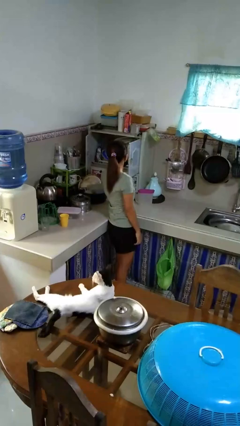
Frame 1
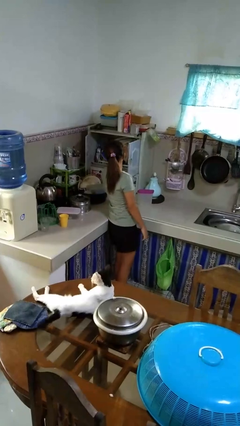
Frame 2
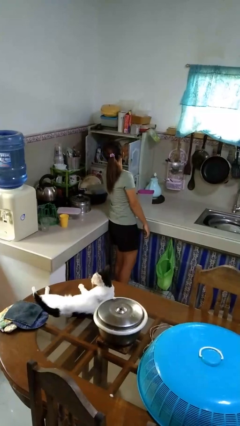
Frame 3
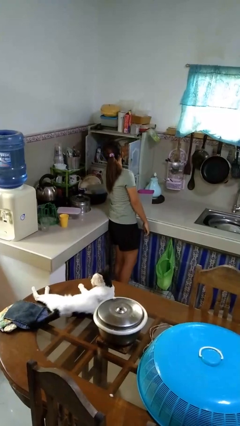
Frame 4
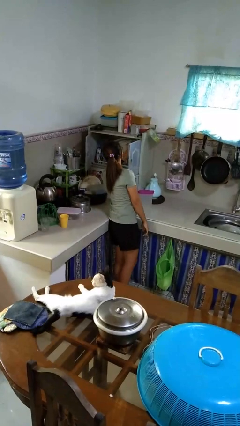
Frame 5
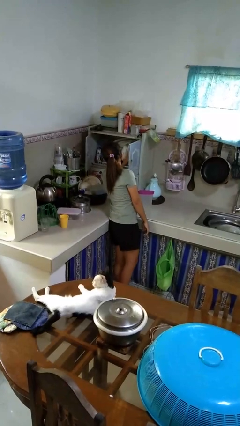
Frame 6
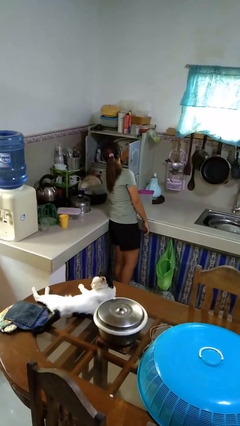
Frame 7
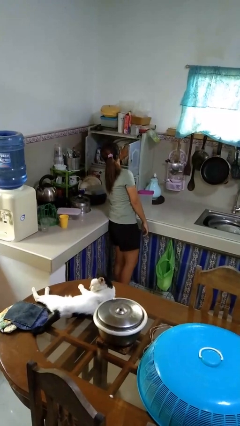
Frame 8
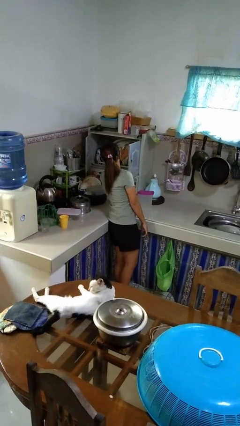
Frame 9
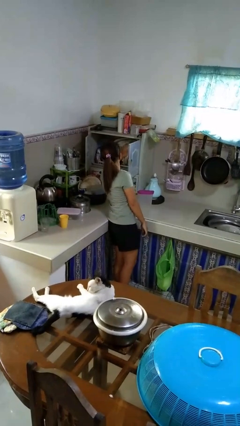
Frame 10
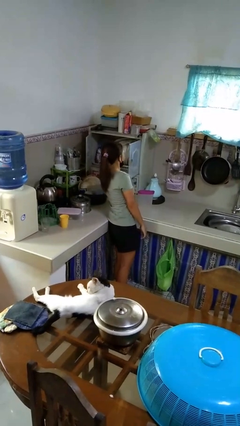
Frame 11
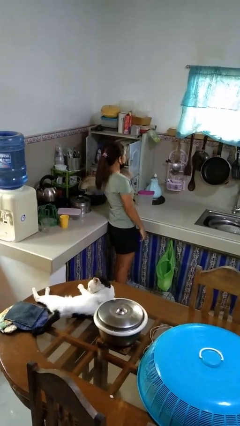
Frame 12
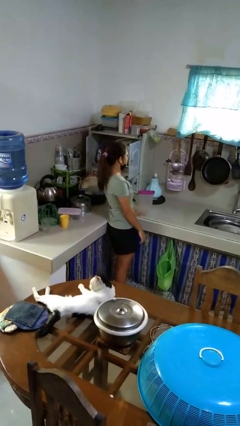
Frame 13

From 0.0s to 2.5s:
person searches in kitchen drawer

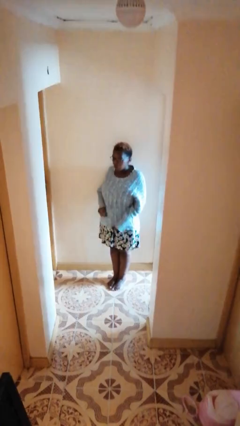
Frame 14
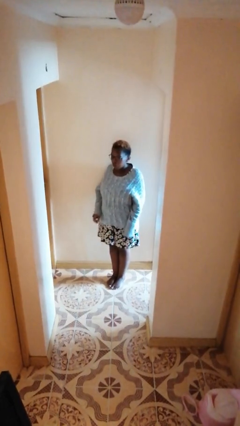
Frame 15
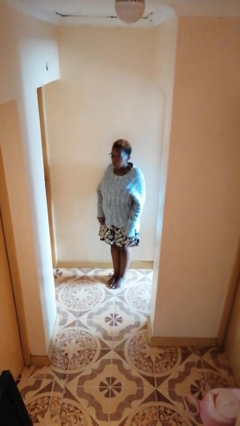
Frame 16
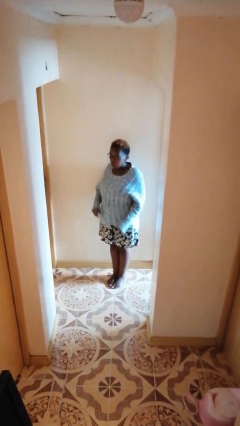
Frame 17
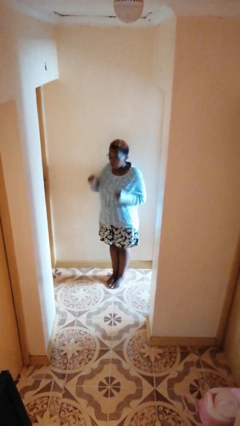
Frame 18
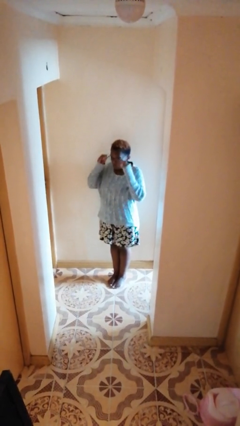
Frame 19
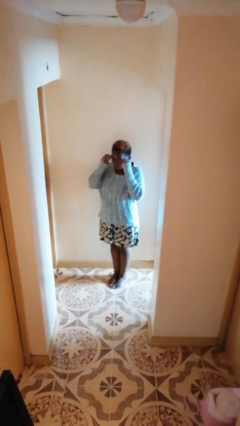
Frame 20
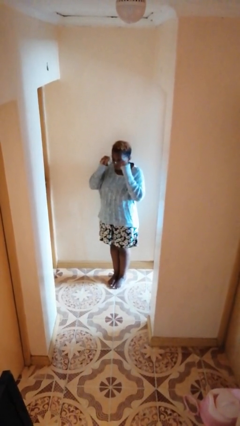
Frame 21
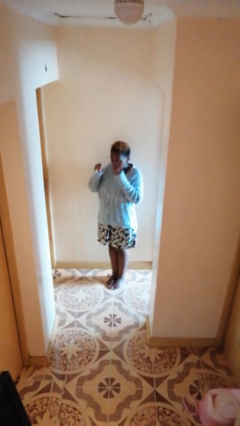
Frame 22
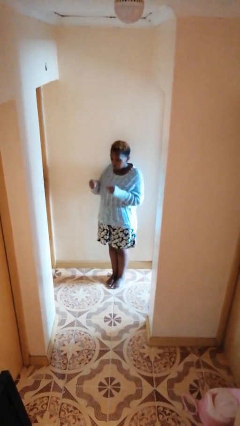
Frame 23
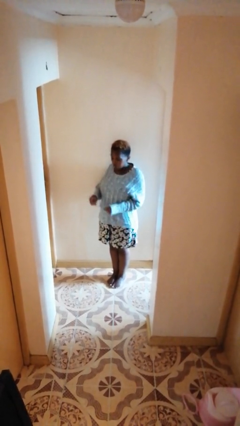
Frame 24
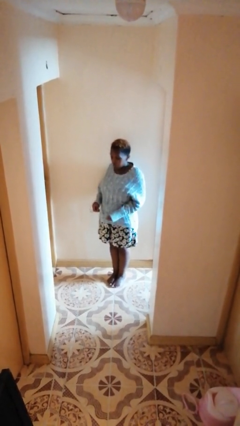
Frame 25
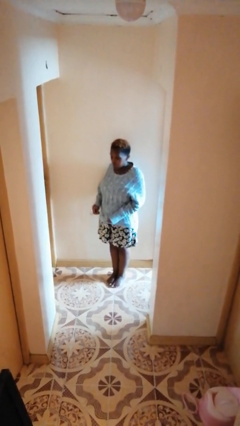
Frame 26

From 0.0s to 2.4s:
person takes off glasses

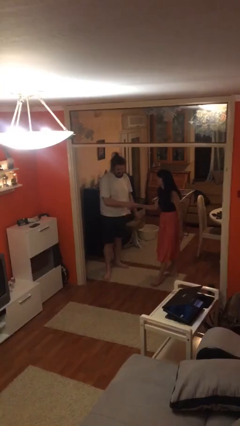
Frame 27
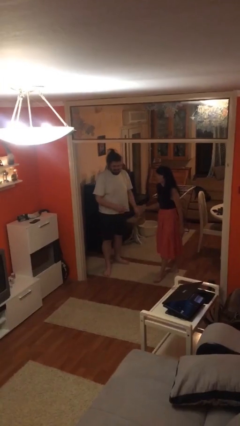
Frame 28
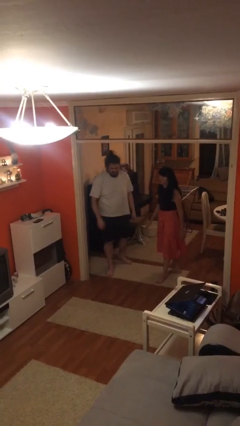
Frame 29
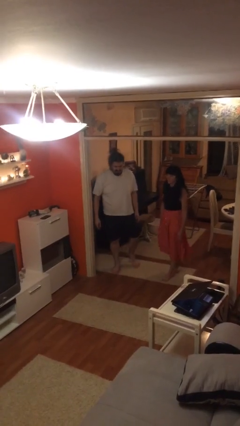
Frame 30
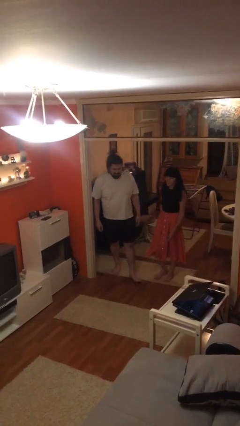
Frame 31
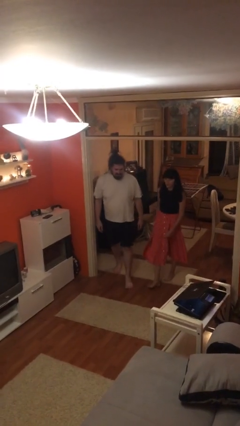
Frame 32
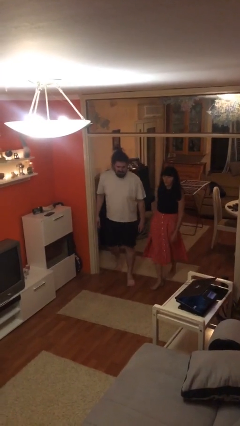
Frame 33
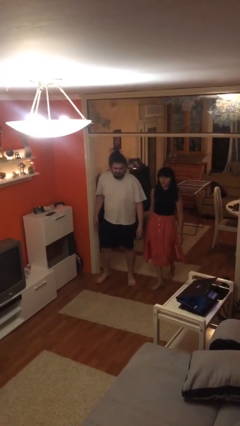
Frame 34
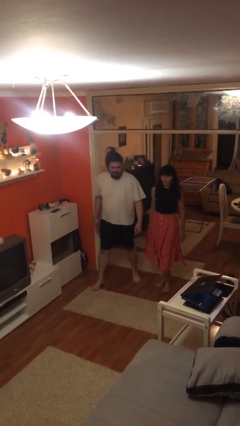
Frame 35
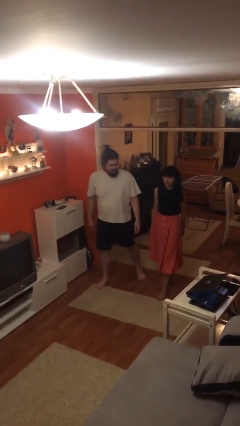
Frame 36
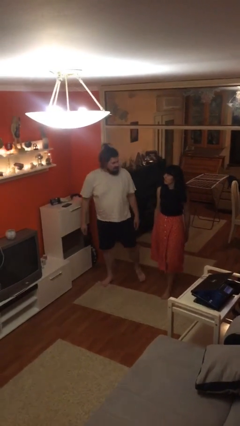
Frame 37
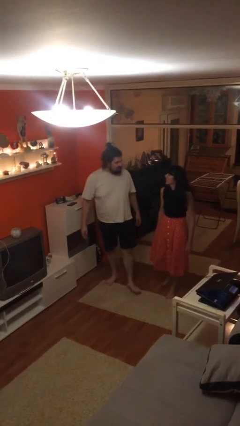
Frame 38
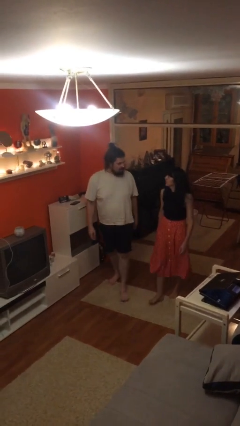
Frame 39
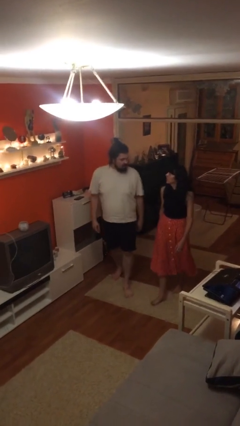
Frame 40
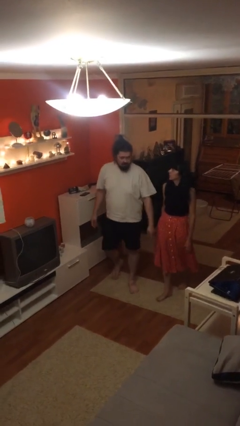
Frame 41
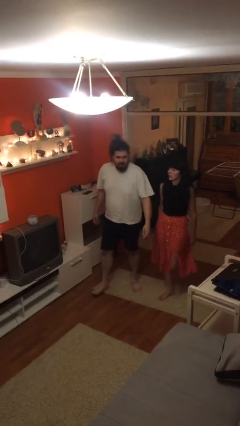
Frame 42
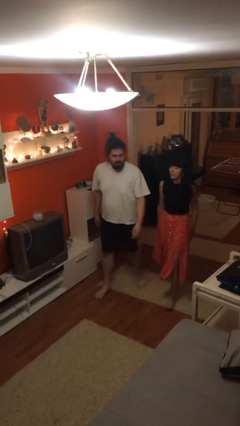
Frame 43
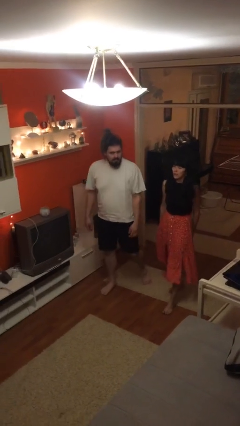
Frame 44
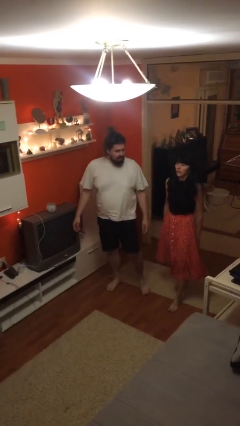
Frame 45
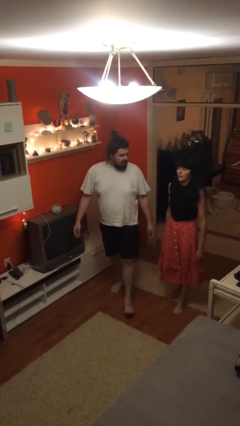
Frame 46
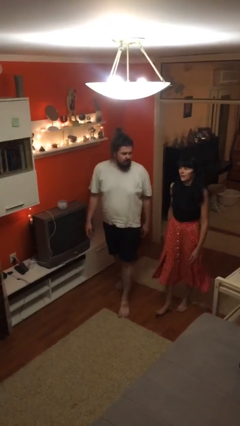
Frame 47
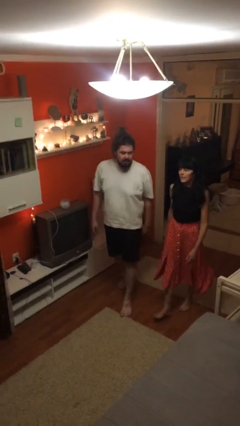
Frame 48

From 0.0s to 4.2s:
person talks to person

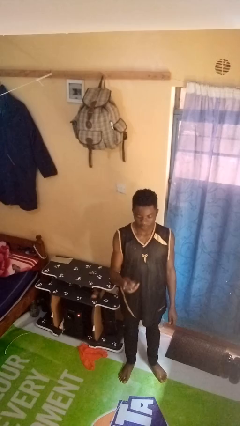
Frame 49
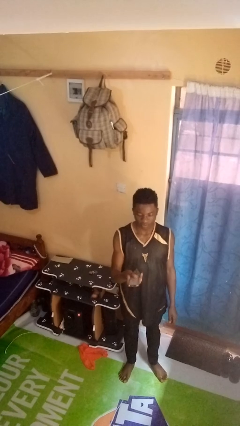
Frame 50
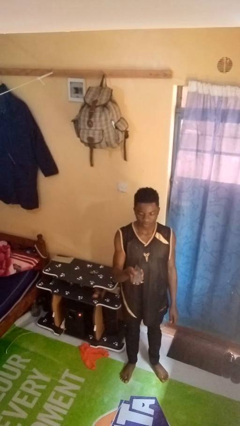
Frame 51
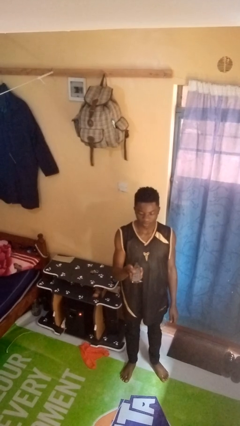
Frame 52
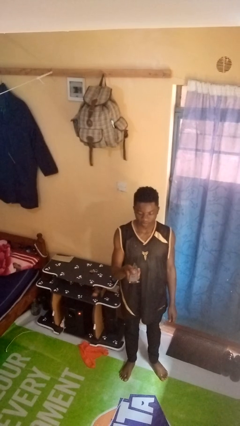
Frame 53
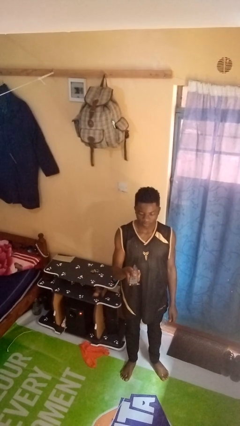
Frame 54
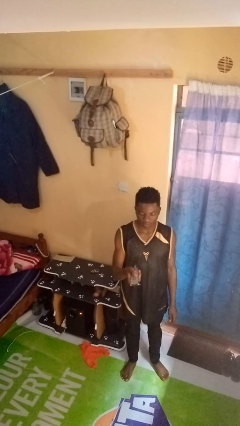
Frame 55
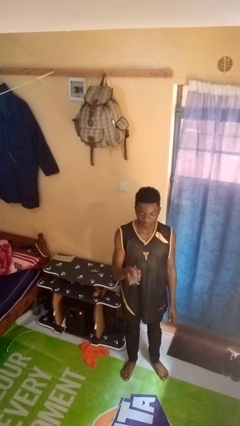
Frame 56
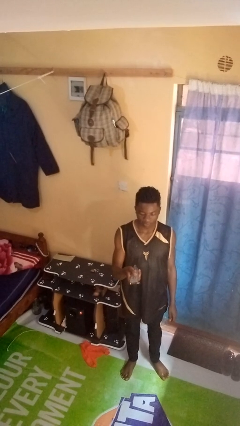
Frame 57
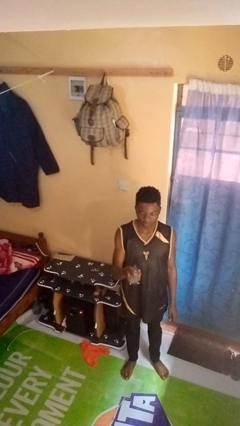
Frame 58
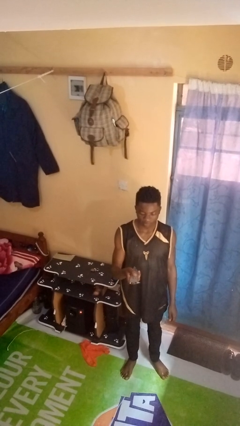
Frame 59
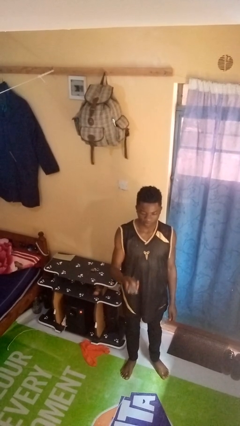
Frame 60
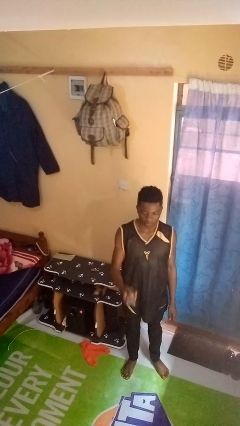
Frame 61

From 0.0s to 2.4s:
person uses television remote

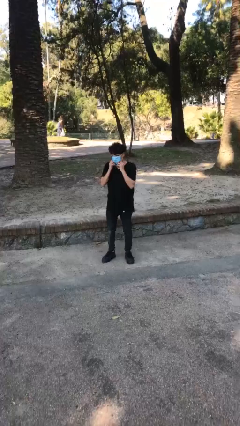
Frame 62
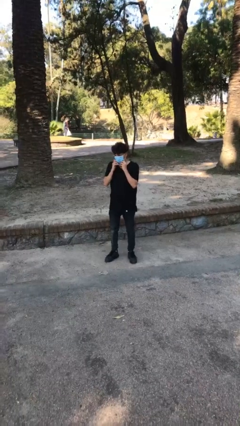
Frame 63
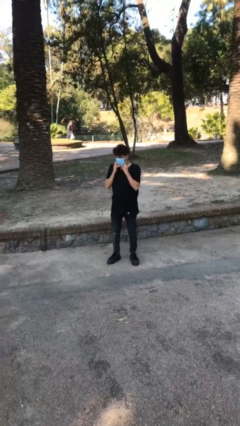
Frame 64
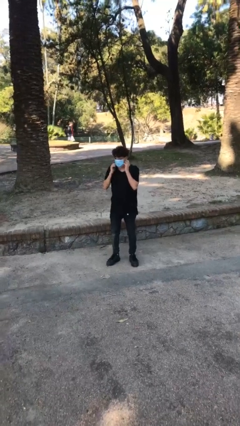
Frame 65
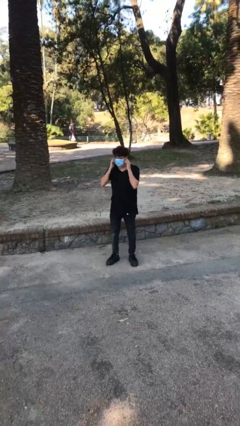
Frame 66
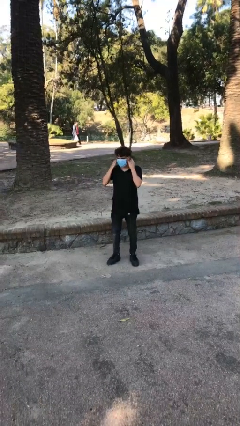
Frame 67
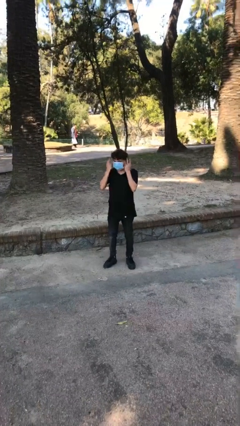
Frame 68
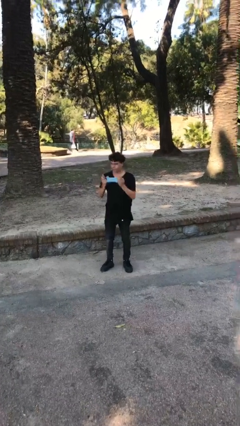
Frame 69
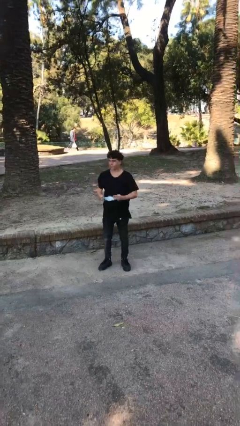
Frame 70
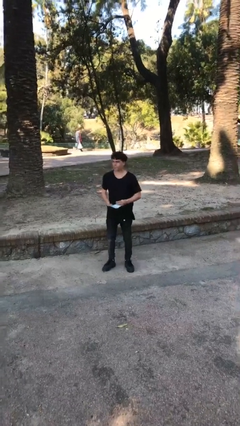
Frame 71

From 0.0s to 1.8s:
person takes off facemask

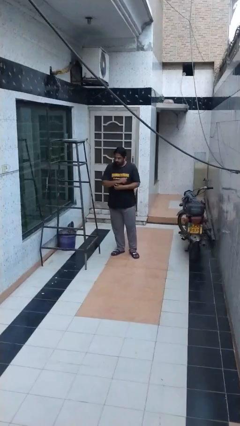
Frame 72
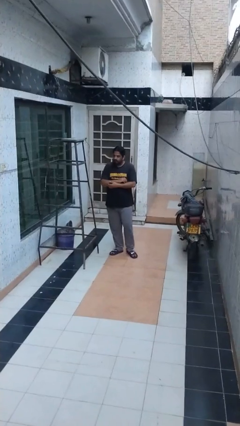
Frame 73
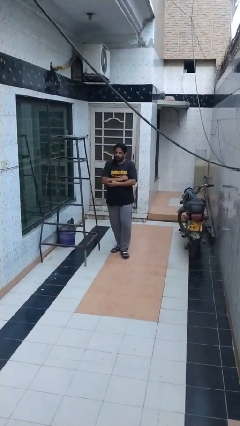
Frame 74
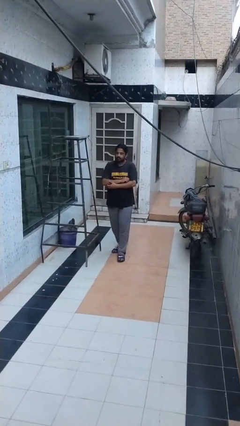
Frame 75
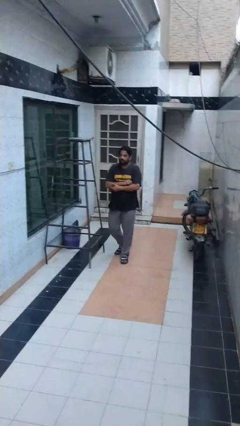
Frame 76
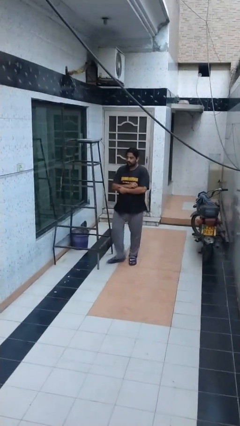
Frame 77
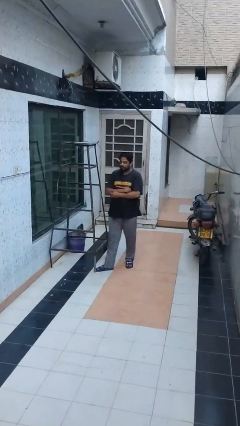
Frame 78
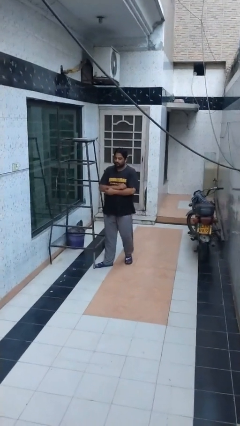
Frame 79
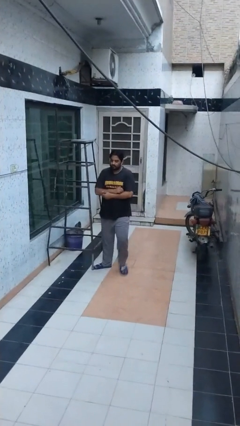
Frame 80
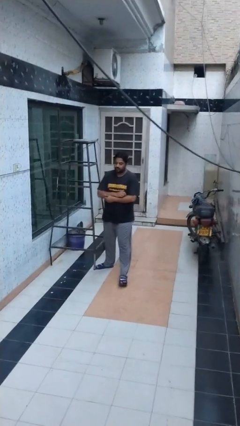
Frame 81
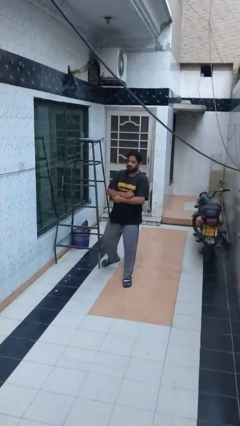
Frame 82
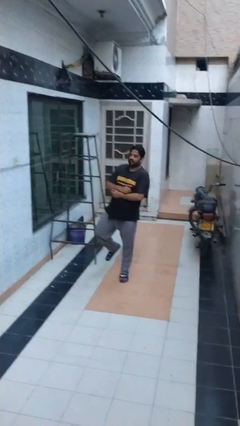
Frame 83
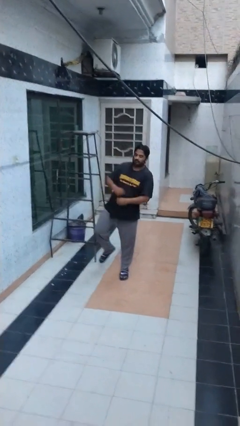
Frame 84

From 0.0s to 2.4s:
person trips on object on floor

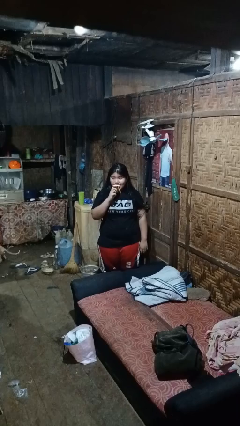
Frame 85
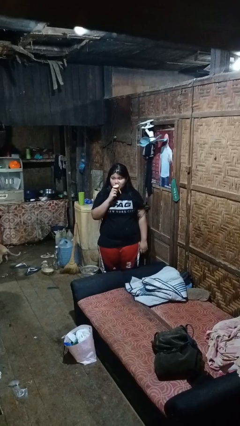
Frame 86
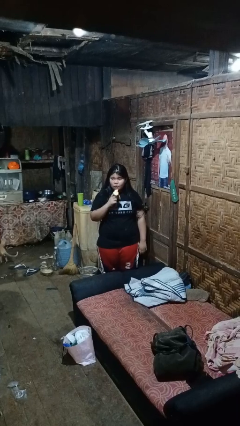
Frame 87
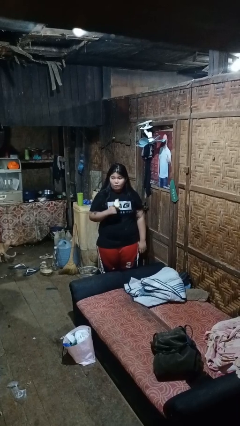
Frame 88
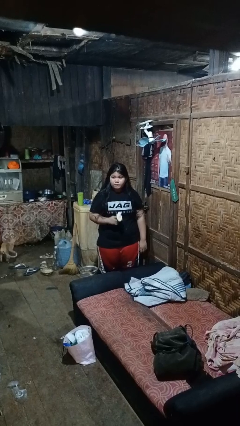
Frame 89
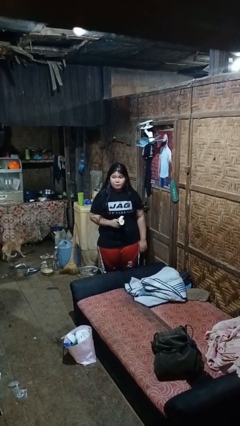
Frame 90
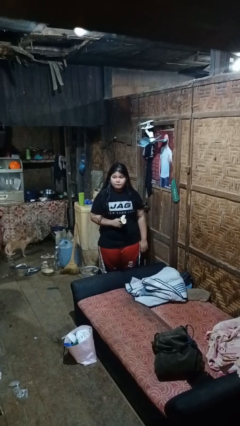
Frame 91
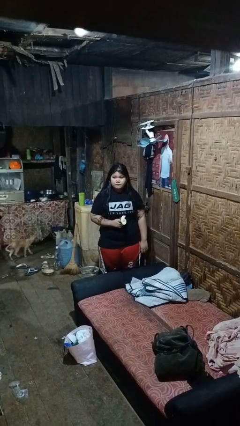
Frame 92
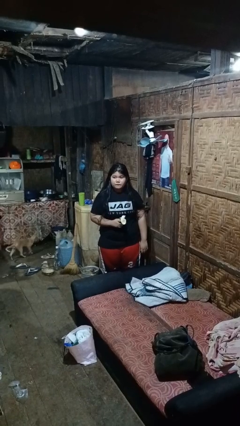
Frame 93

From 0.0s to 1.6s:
person eats banana
